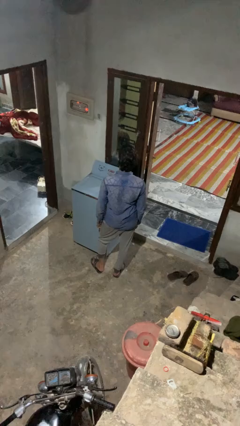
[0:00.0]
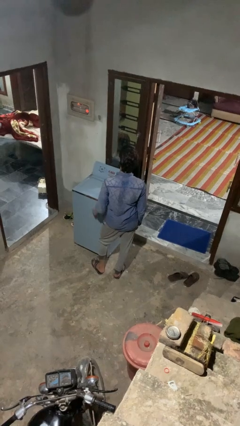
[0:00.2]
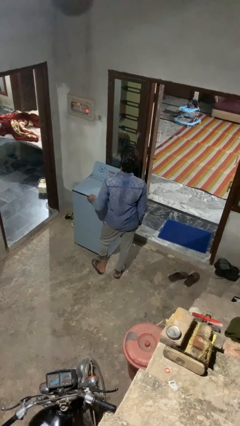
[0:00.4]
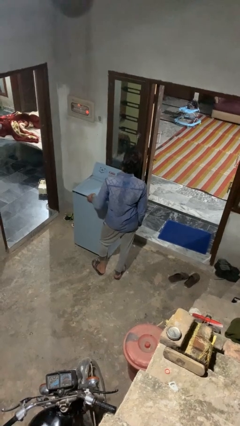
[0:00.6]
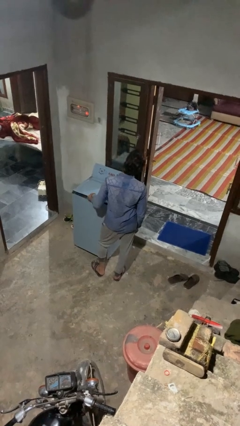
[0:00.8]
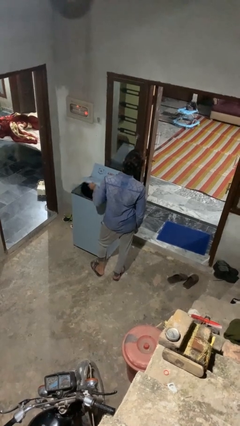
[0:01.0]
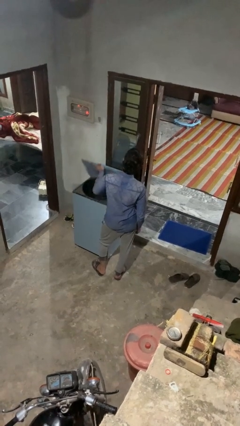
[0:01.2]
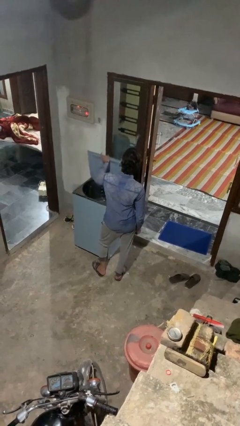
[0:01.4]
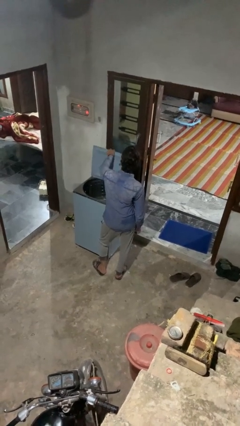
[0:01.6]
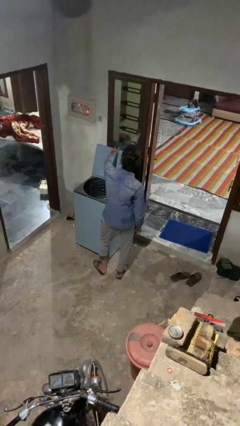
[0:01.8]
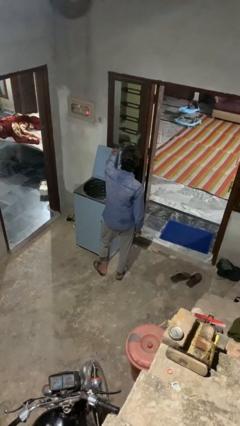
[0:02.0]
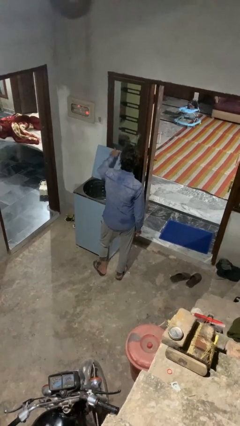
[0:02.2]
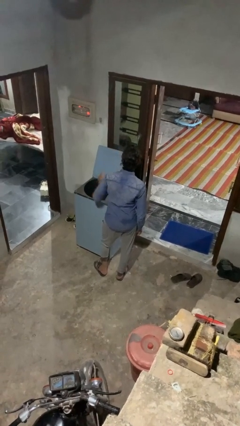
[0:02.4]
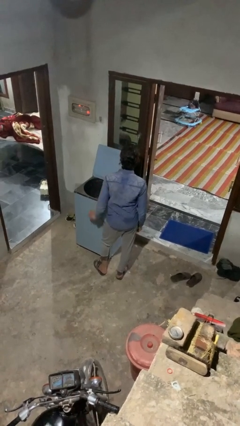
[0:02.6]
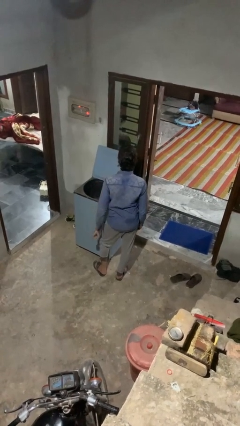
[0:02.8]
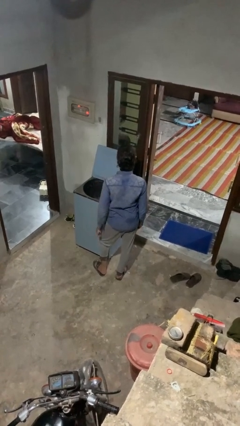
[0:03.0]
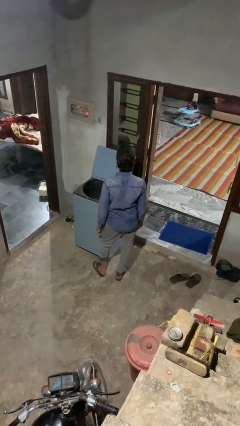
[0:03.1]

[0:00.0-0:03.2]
person opens clothes washer

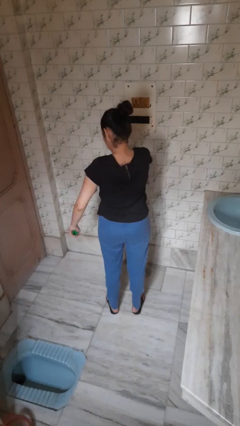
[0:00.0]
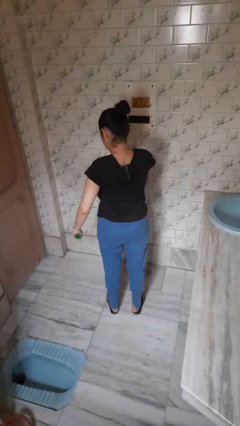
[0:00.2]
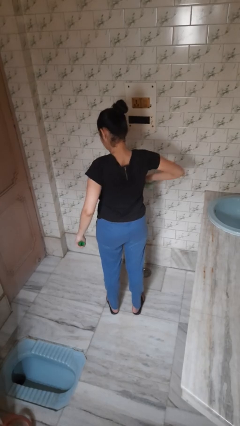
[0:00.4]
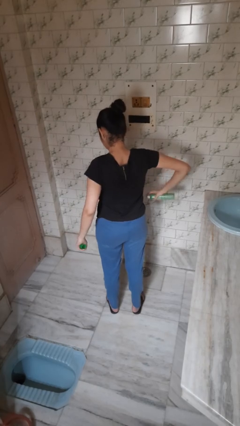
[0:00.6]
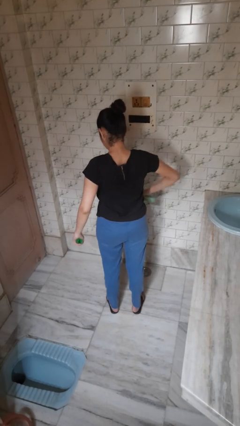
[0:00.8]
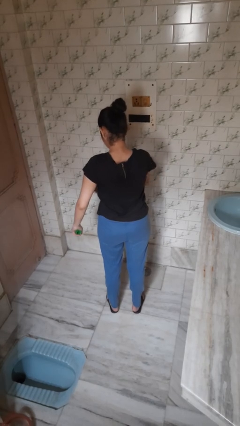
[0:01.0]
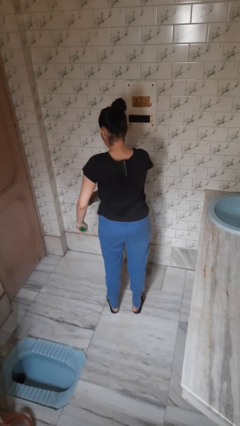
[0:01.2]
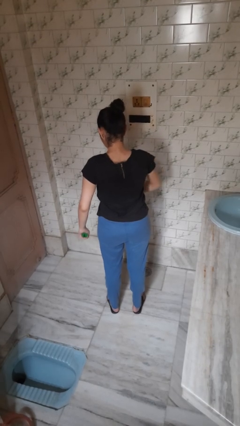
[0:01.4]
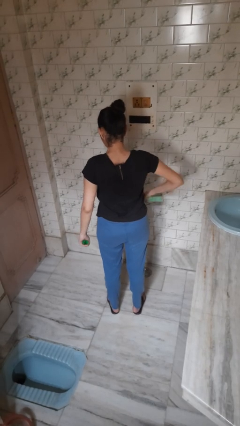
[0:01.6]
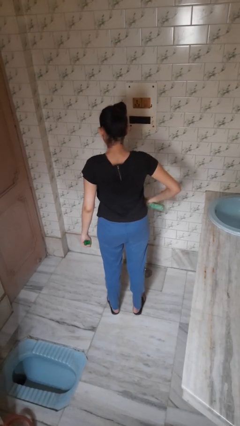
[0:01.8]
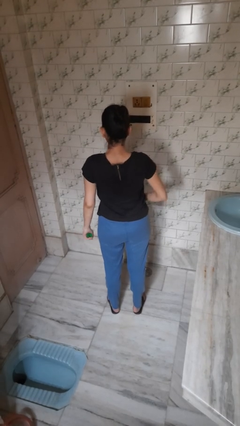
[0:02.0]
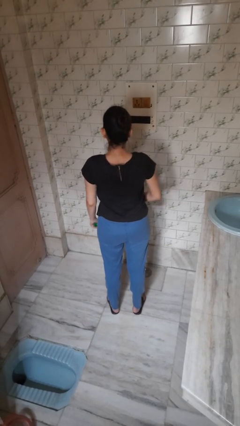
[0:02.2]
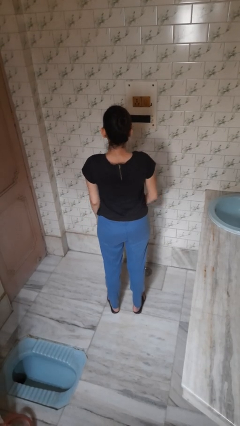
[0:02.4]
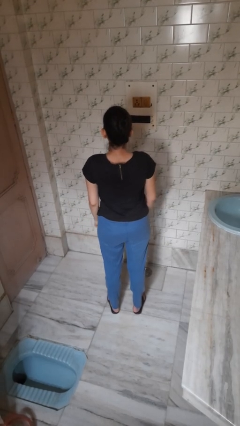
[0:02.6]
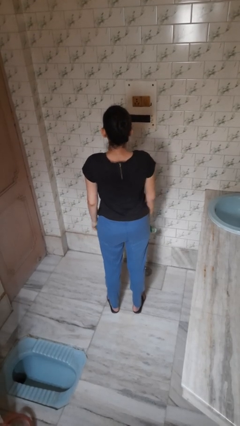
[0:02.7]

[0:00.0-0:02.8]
person applies deodorant

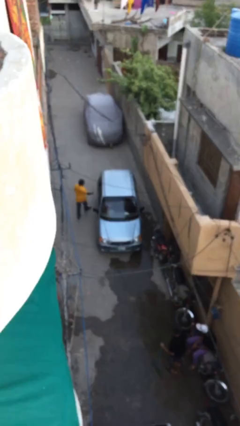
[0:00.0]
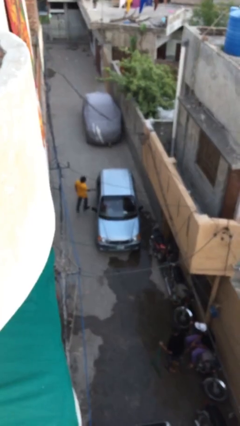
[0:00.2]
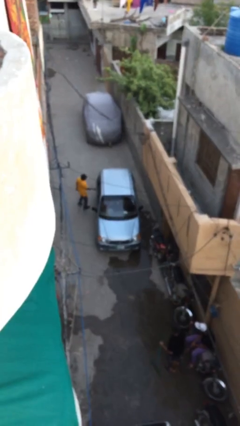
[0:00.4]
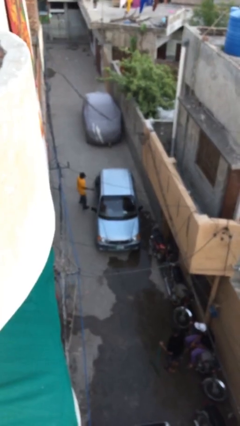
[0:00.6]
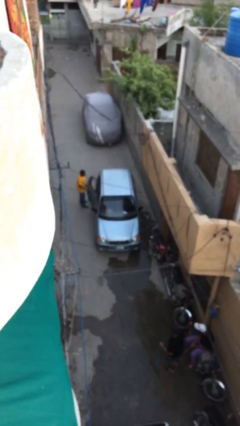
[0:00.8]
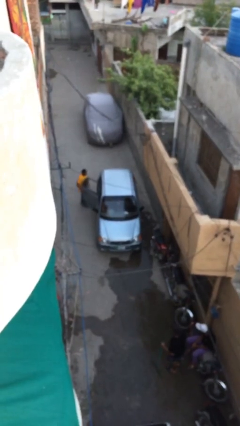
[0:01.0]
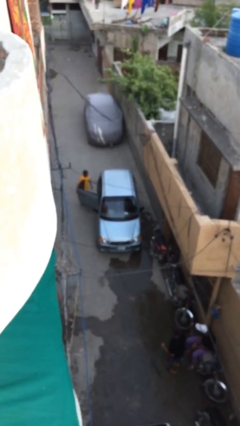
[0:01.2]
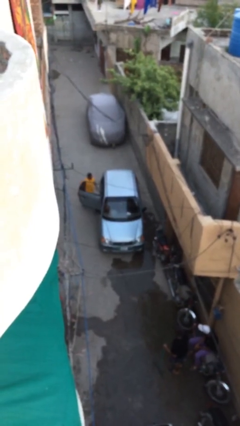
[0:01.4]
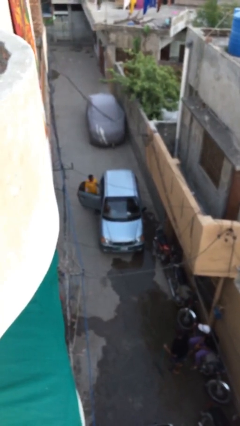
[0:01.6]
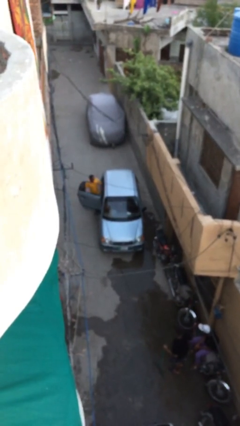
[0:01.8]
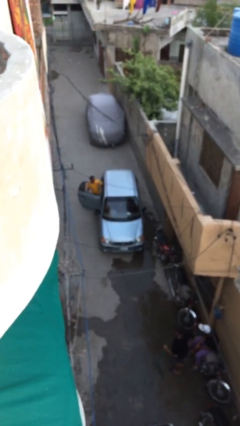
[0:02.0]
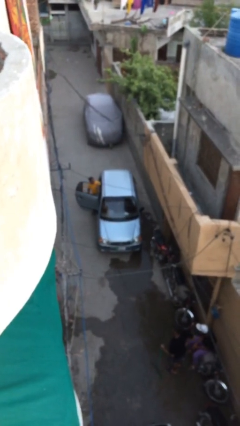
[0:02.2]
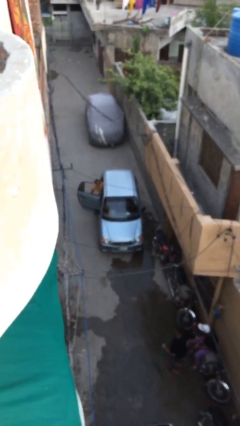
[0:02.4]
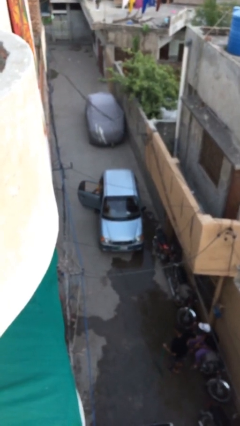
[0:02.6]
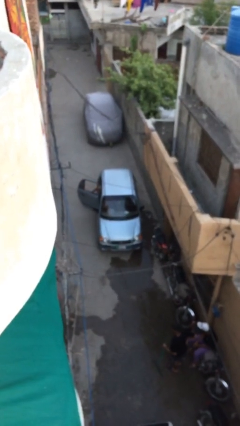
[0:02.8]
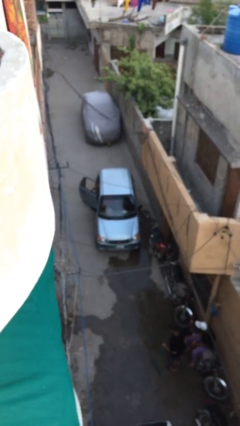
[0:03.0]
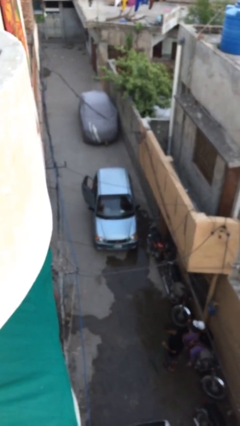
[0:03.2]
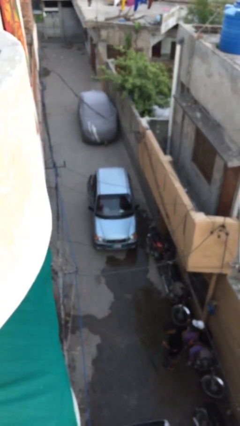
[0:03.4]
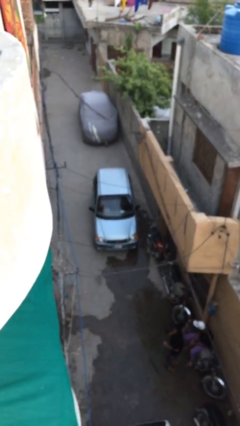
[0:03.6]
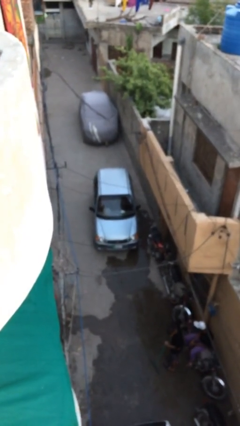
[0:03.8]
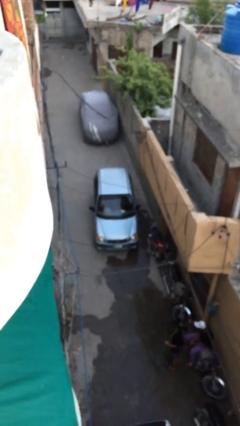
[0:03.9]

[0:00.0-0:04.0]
car picks up person

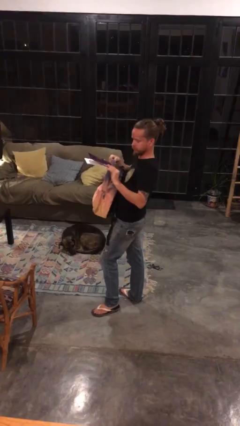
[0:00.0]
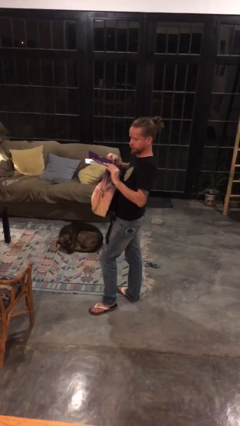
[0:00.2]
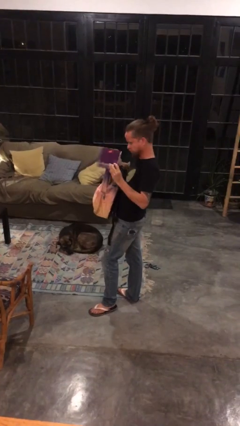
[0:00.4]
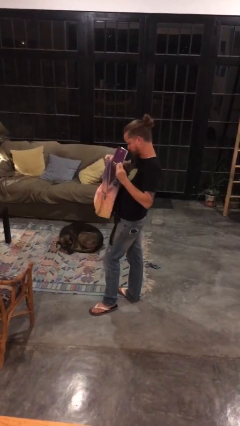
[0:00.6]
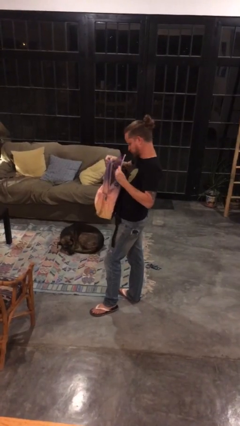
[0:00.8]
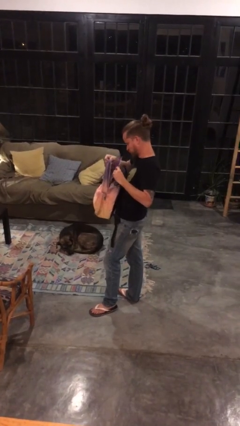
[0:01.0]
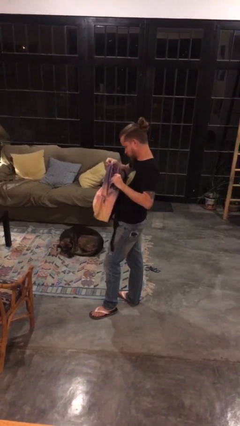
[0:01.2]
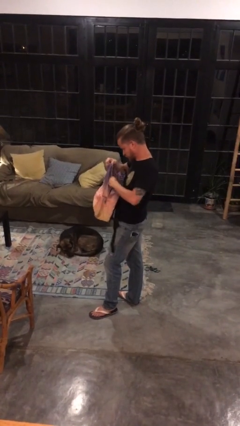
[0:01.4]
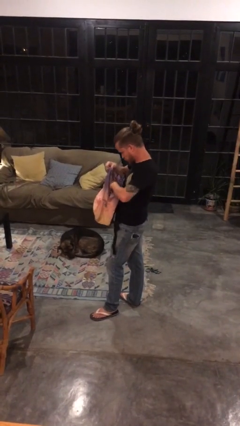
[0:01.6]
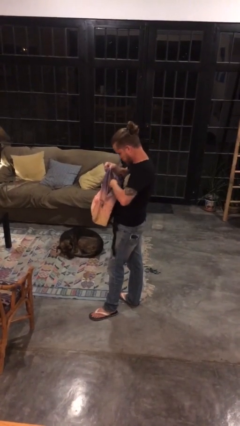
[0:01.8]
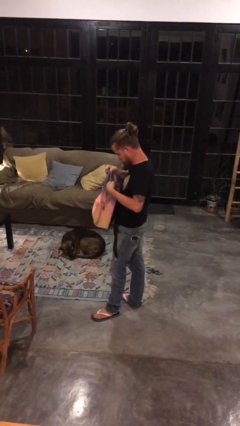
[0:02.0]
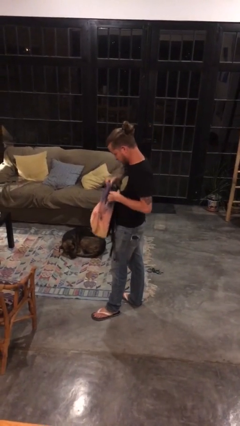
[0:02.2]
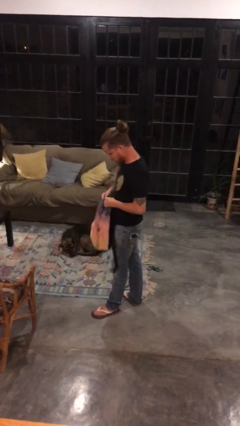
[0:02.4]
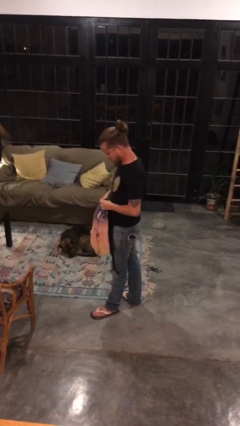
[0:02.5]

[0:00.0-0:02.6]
person puts object into backpack

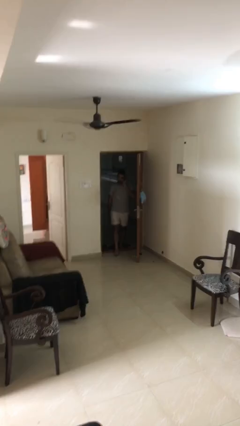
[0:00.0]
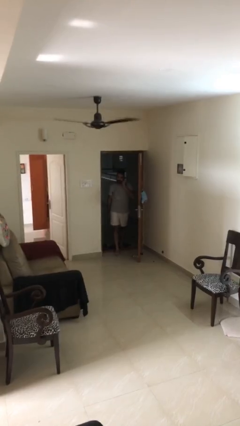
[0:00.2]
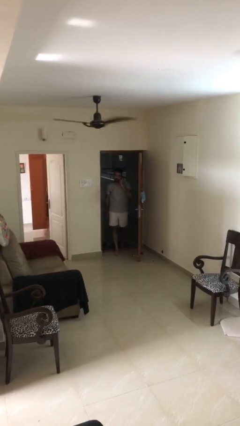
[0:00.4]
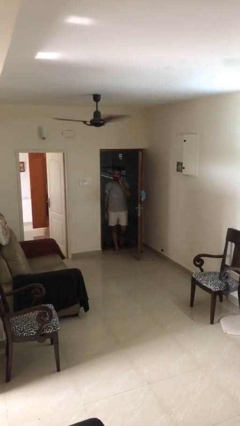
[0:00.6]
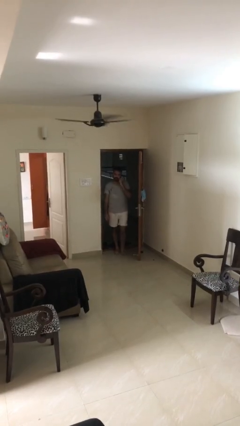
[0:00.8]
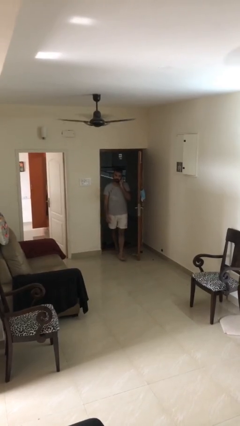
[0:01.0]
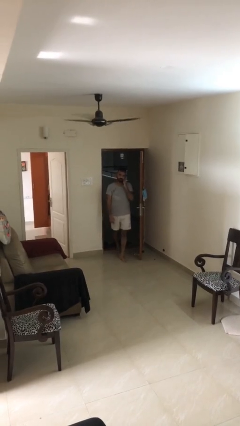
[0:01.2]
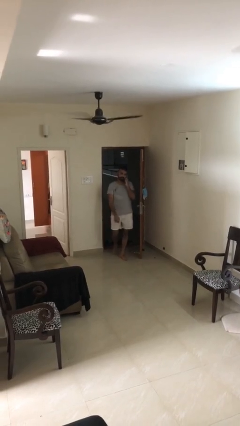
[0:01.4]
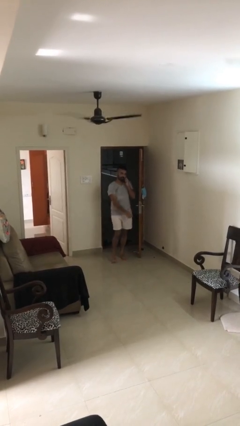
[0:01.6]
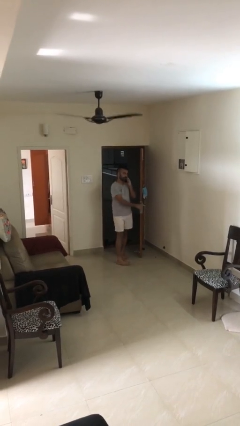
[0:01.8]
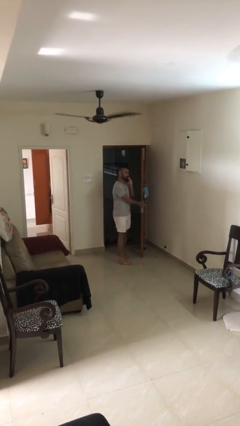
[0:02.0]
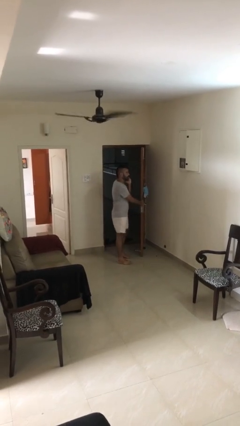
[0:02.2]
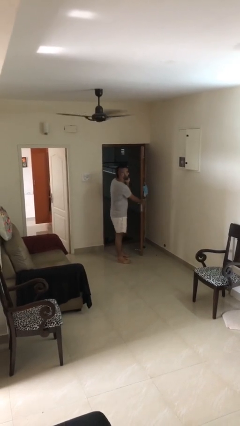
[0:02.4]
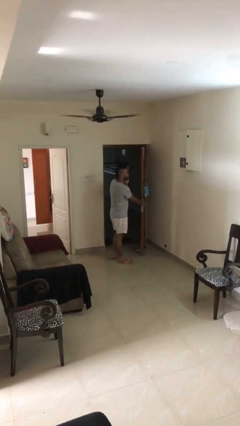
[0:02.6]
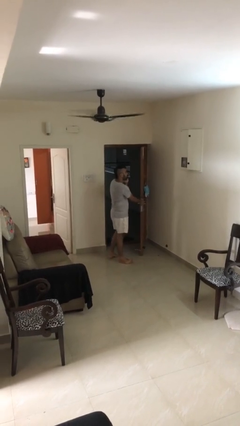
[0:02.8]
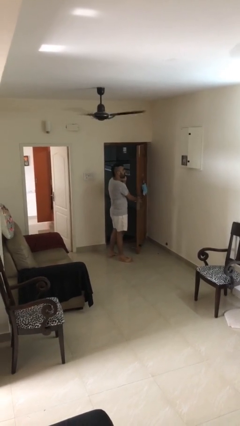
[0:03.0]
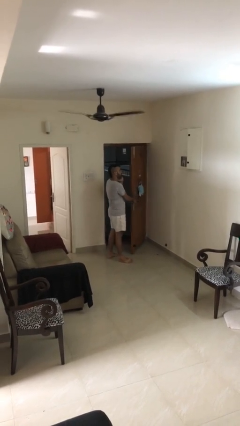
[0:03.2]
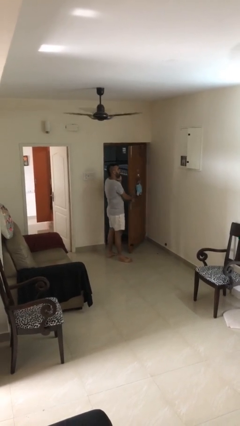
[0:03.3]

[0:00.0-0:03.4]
person enters scene through structure

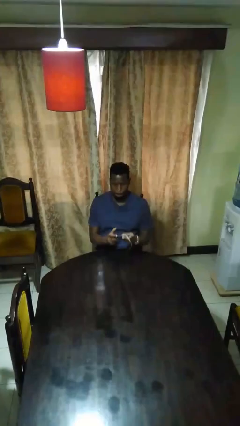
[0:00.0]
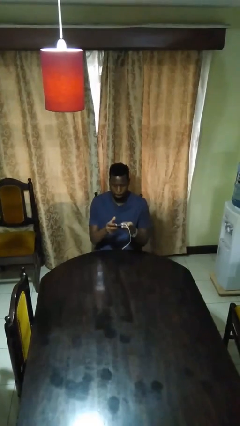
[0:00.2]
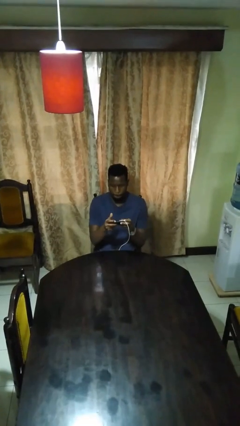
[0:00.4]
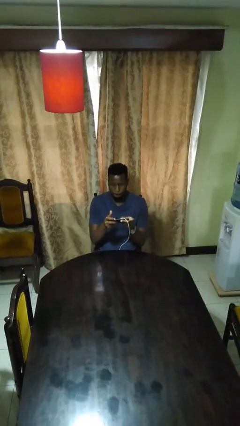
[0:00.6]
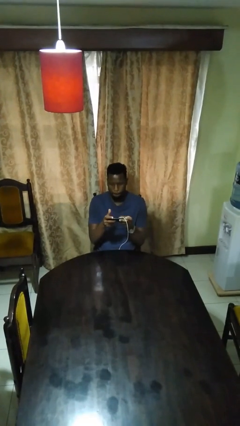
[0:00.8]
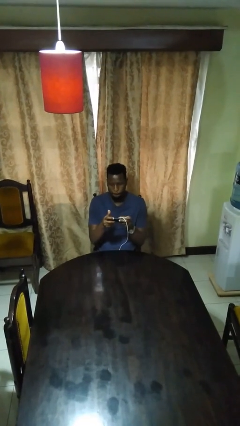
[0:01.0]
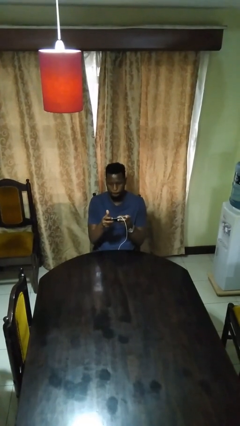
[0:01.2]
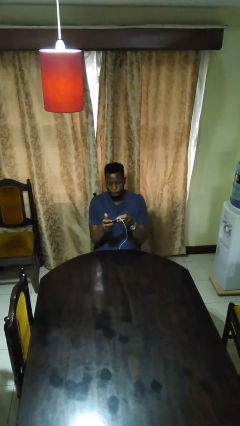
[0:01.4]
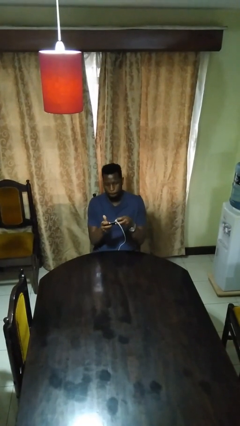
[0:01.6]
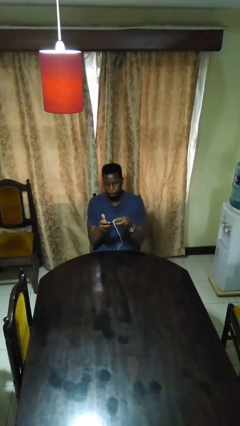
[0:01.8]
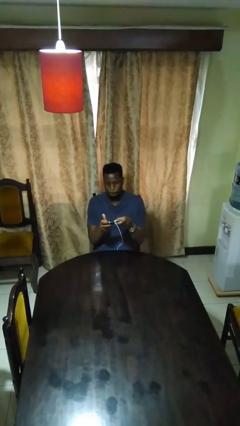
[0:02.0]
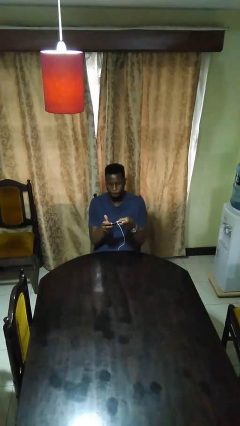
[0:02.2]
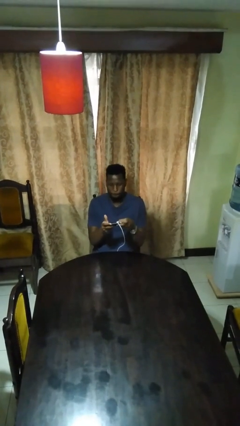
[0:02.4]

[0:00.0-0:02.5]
person interacts with handheld game
